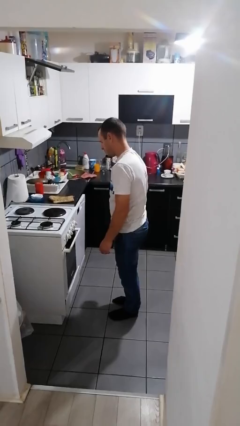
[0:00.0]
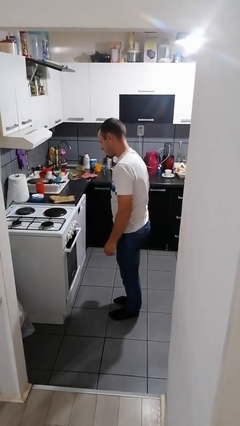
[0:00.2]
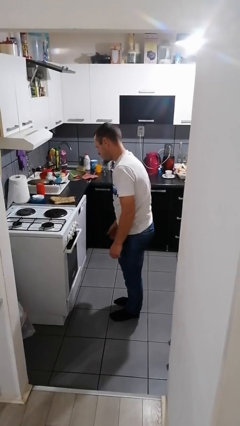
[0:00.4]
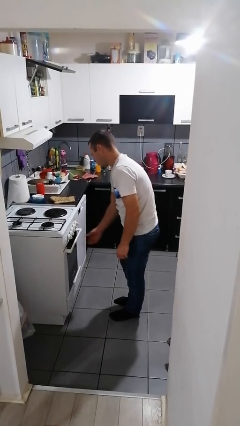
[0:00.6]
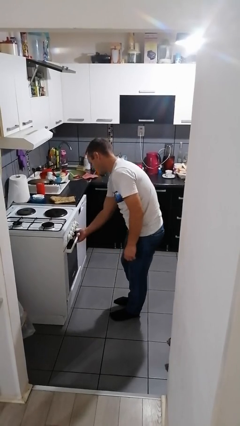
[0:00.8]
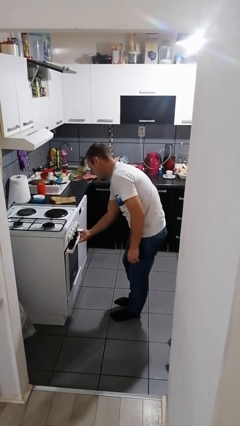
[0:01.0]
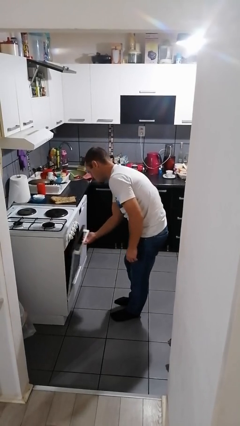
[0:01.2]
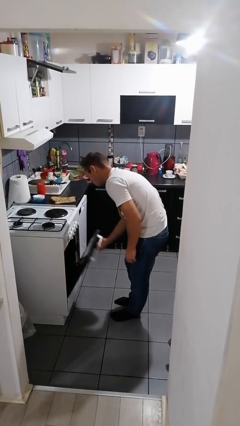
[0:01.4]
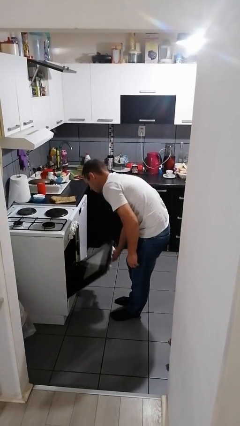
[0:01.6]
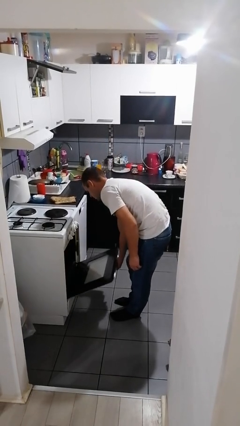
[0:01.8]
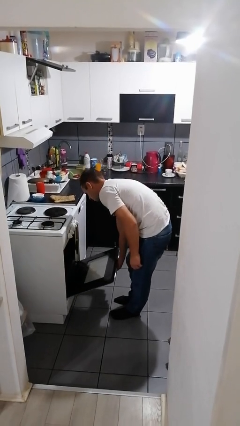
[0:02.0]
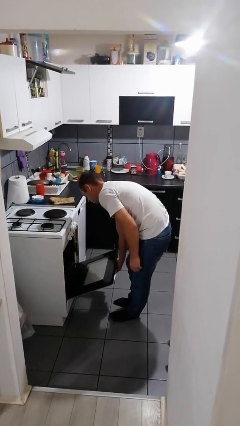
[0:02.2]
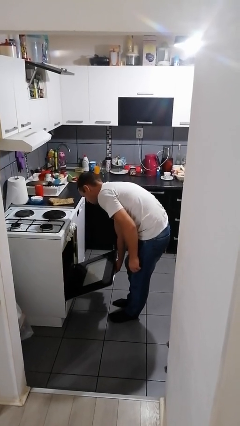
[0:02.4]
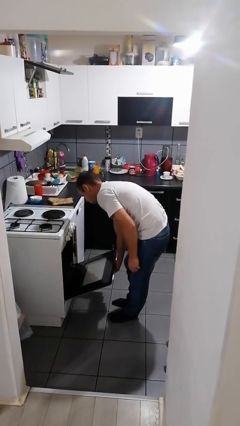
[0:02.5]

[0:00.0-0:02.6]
person opens oven door

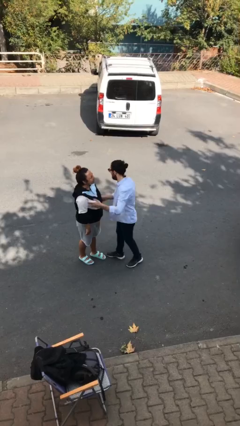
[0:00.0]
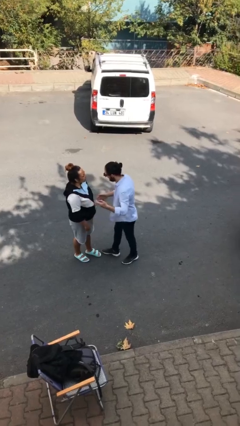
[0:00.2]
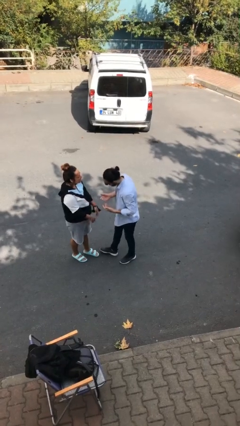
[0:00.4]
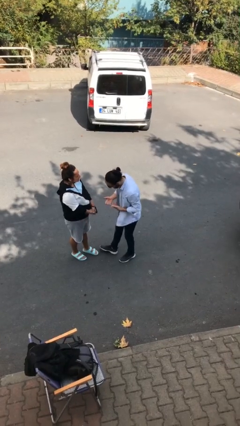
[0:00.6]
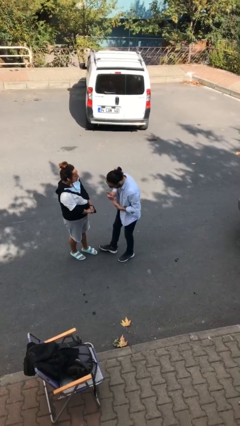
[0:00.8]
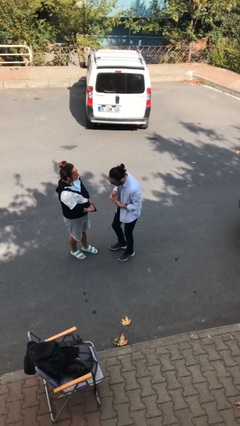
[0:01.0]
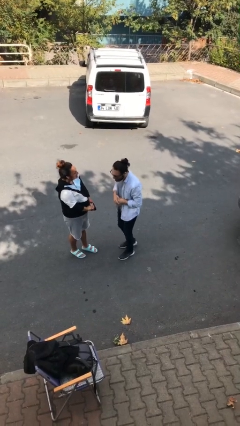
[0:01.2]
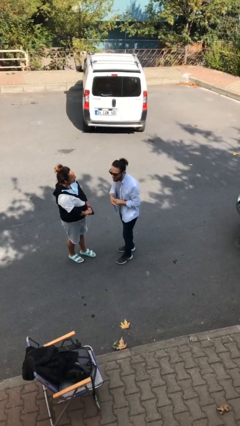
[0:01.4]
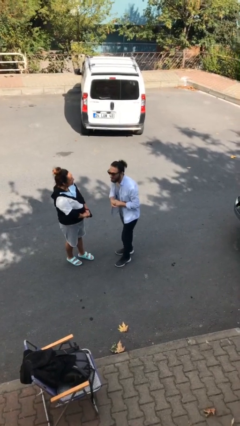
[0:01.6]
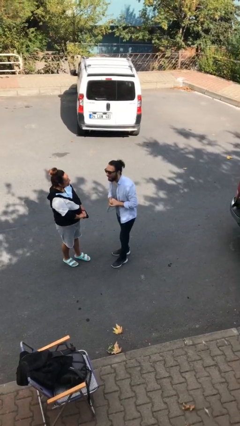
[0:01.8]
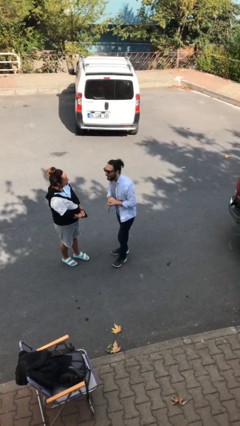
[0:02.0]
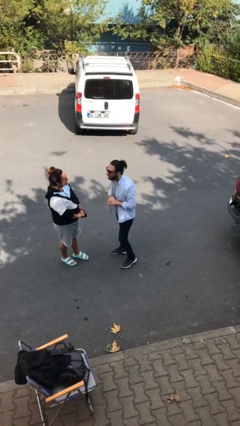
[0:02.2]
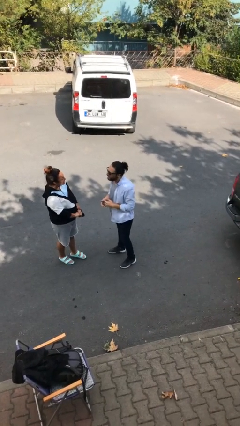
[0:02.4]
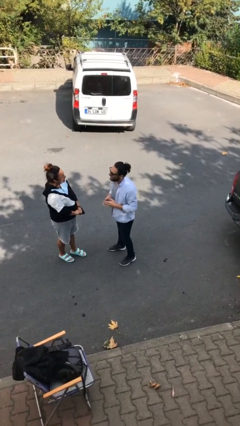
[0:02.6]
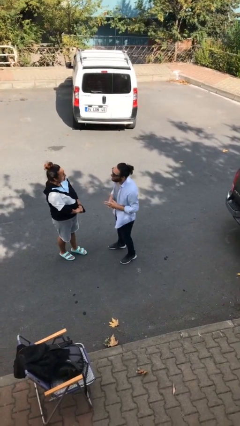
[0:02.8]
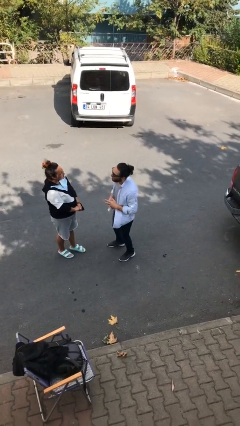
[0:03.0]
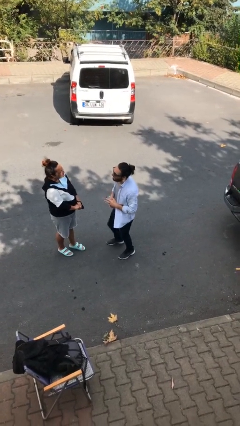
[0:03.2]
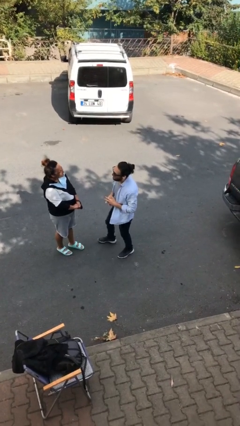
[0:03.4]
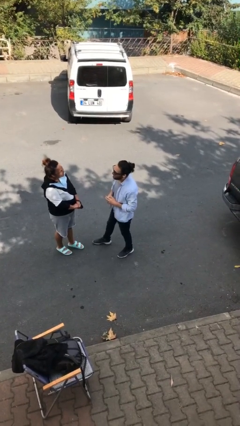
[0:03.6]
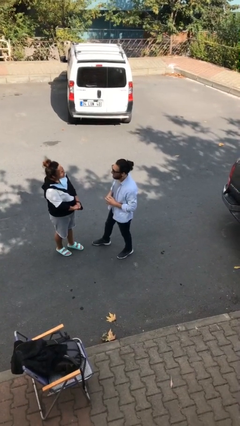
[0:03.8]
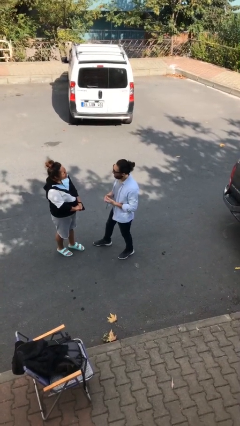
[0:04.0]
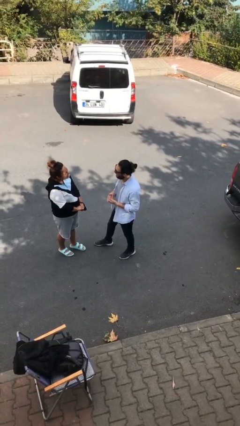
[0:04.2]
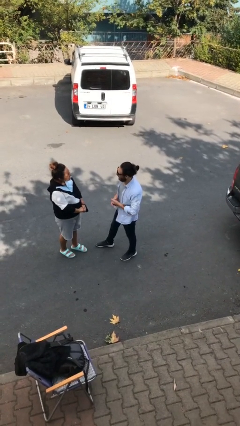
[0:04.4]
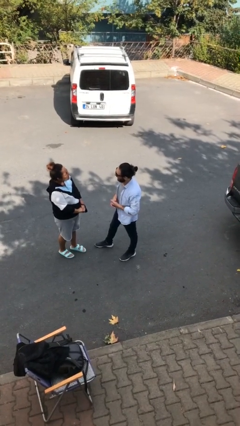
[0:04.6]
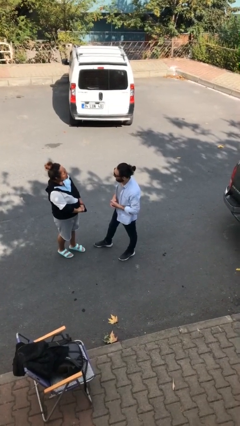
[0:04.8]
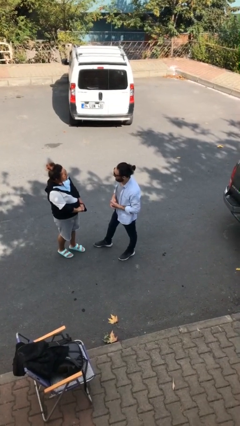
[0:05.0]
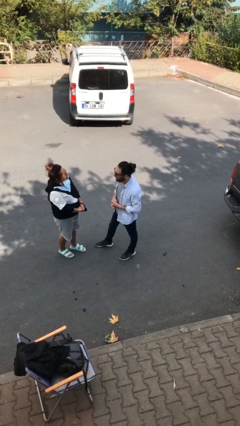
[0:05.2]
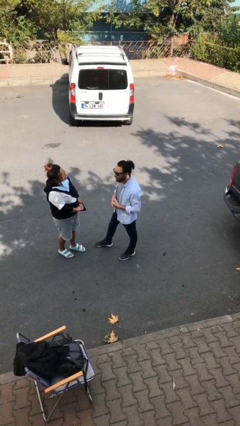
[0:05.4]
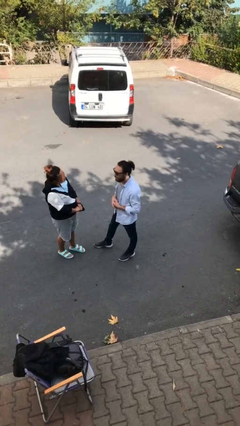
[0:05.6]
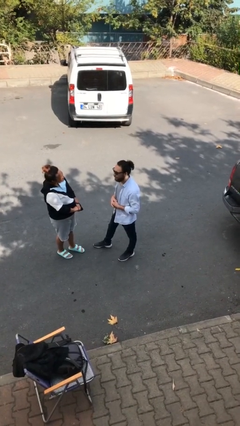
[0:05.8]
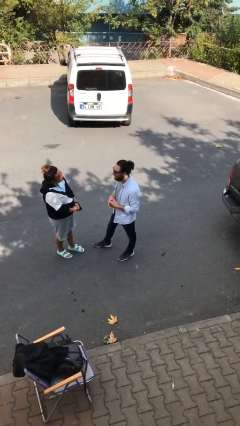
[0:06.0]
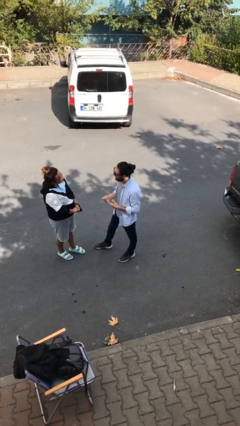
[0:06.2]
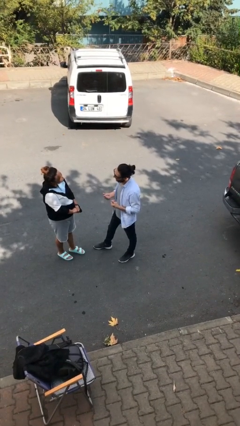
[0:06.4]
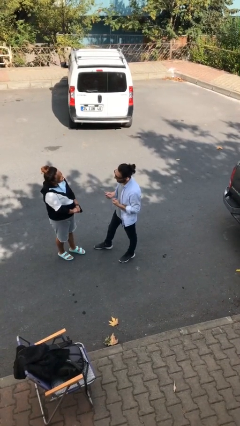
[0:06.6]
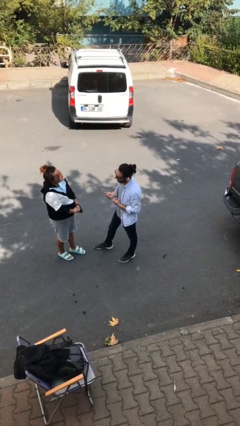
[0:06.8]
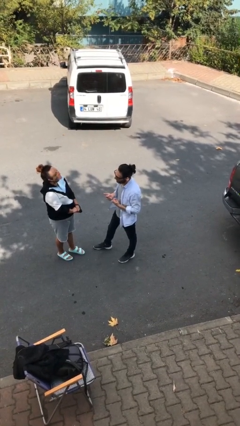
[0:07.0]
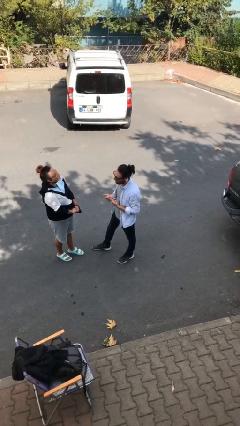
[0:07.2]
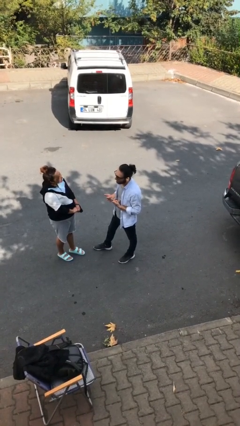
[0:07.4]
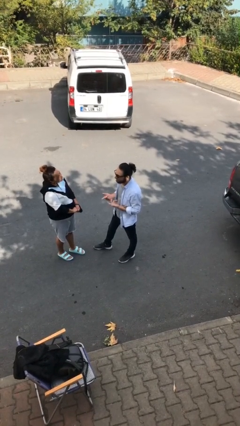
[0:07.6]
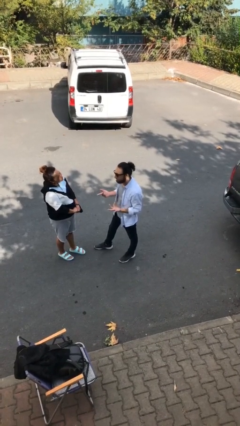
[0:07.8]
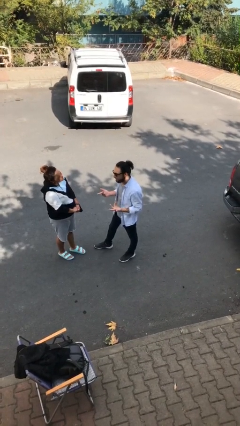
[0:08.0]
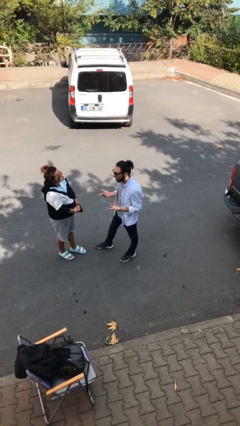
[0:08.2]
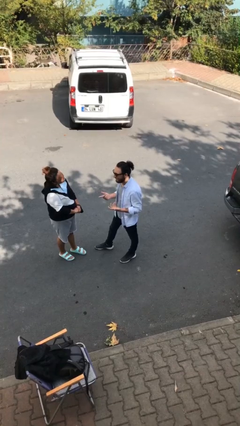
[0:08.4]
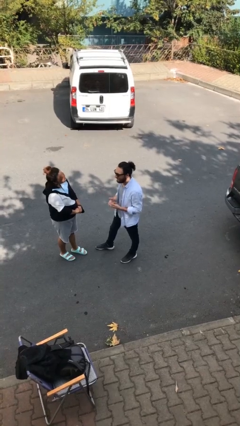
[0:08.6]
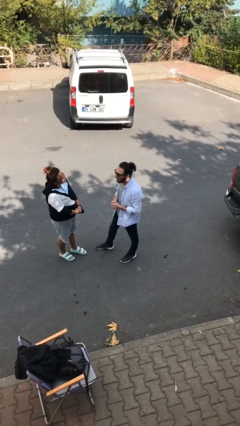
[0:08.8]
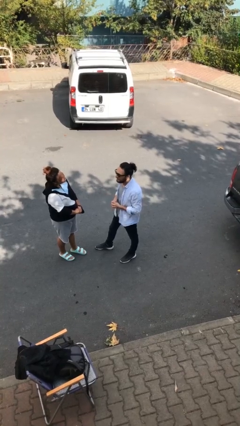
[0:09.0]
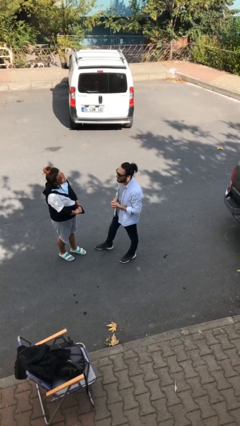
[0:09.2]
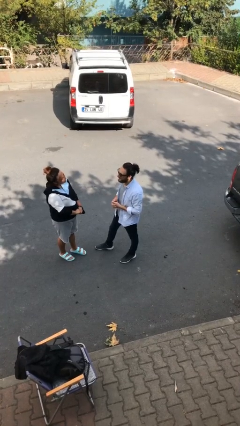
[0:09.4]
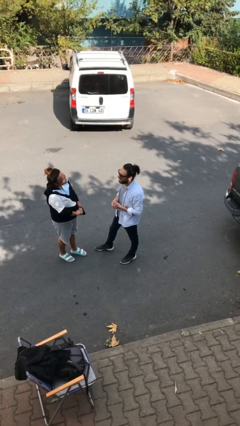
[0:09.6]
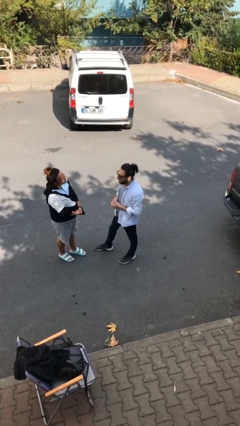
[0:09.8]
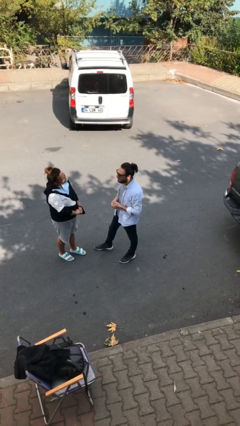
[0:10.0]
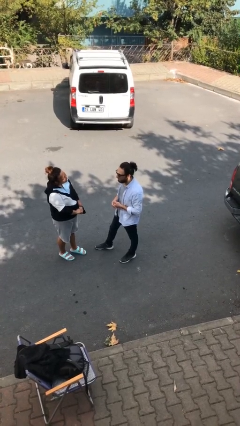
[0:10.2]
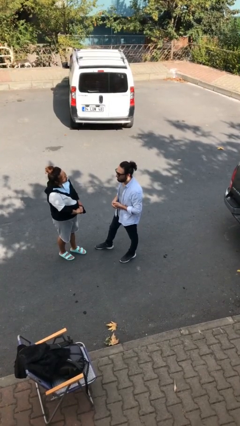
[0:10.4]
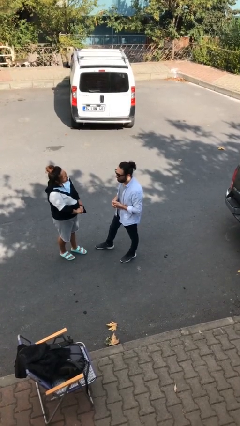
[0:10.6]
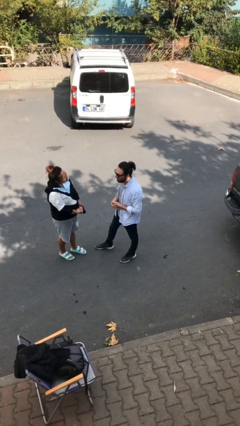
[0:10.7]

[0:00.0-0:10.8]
person talks to person

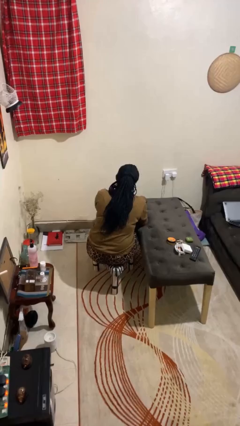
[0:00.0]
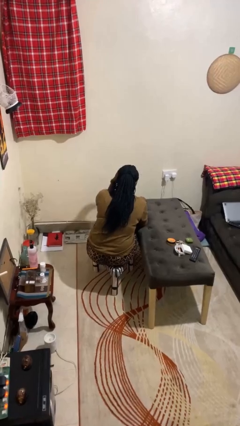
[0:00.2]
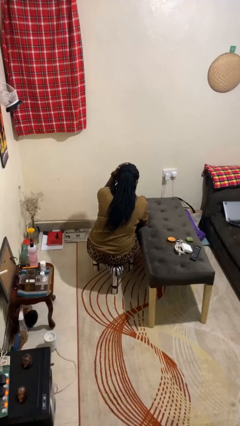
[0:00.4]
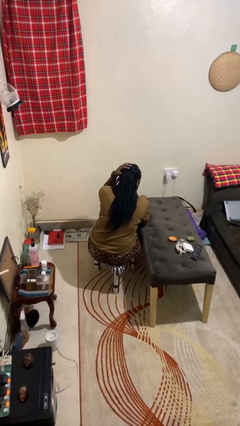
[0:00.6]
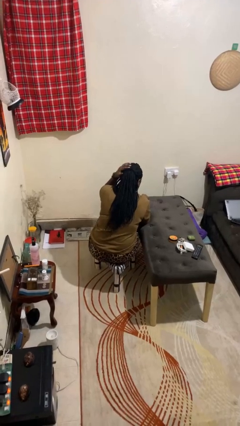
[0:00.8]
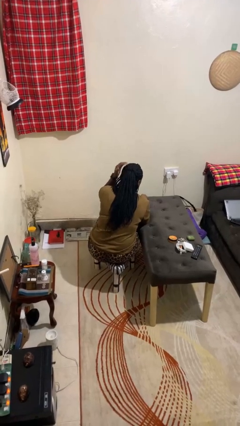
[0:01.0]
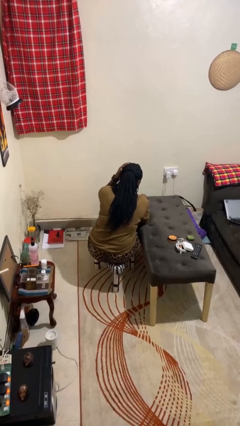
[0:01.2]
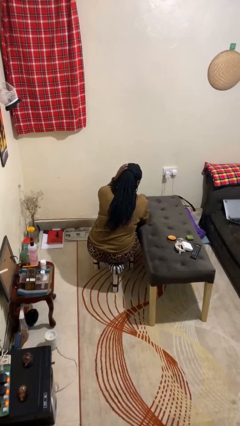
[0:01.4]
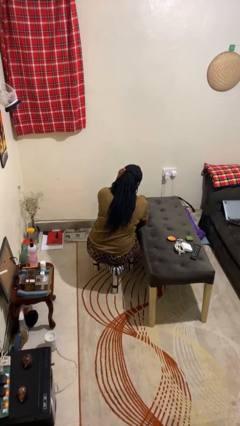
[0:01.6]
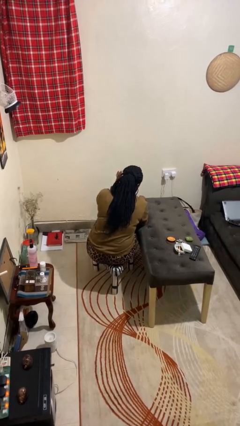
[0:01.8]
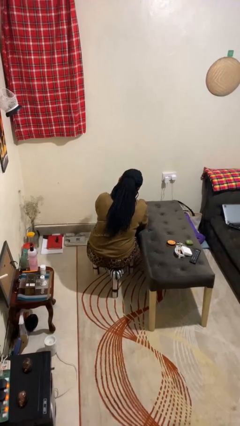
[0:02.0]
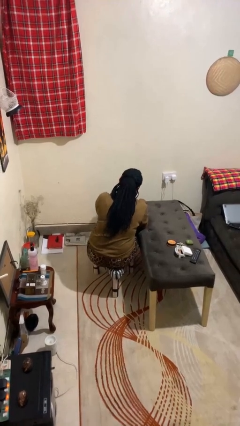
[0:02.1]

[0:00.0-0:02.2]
person strokes hair

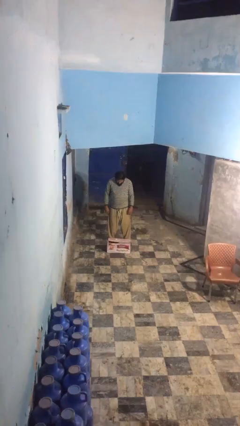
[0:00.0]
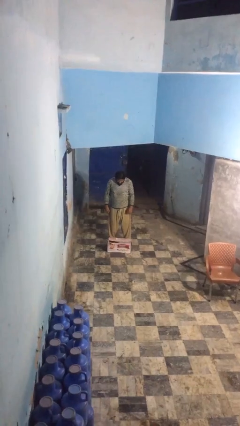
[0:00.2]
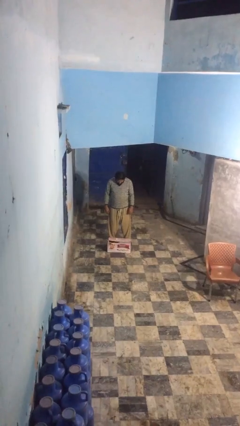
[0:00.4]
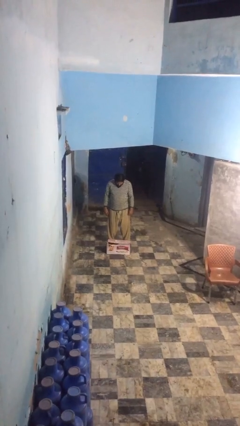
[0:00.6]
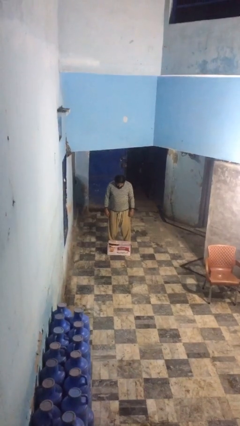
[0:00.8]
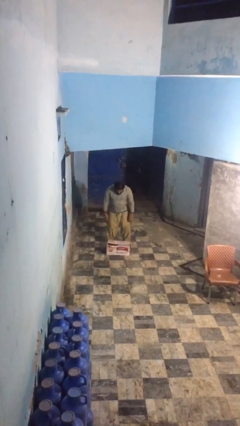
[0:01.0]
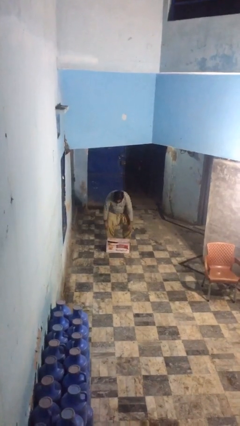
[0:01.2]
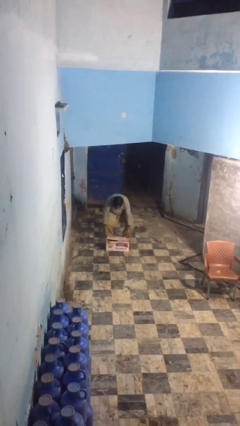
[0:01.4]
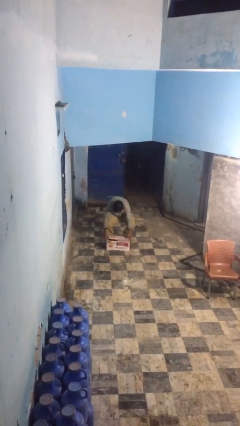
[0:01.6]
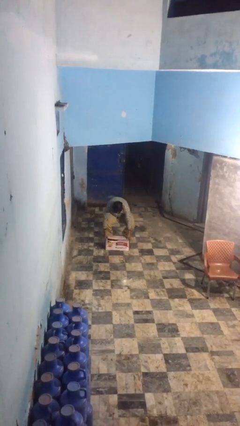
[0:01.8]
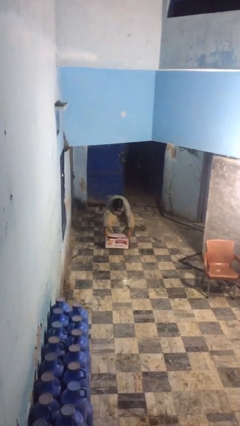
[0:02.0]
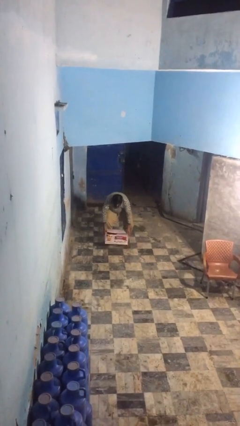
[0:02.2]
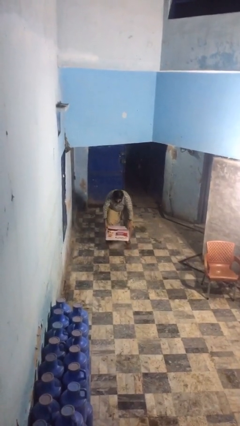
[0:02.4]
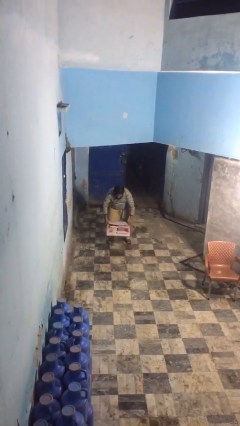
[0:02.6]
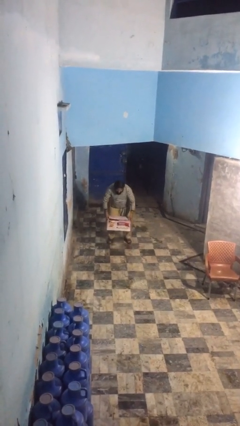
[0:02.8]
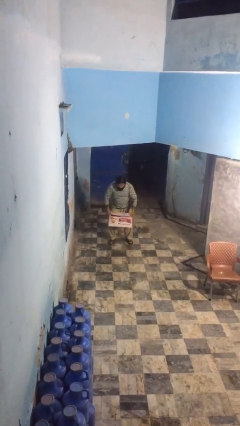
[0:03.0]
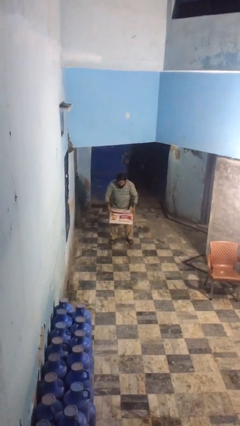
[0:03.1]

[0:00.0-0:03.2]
person picks up object from floor
